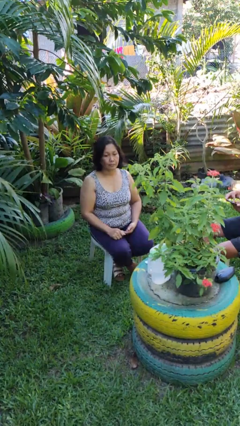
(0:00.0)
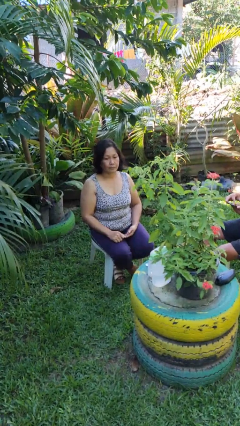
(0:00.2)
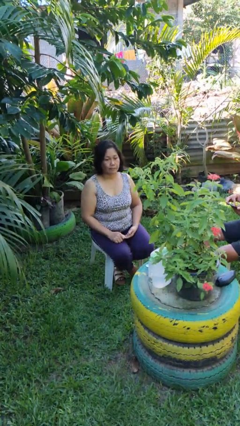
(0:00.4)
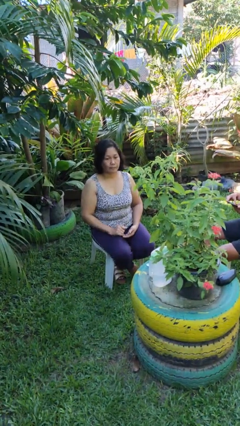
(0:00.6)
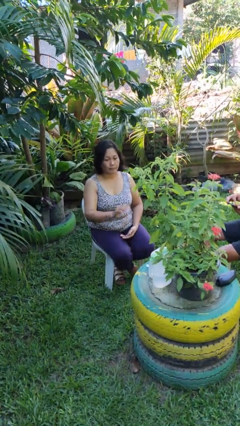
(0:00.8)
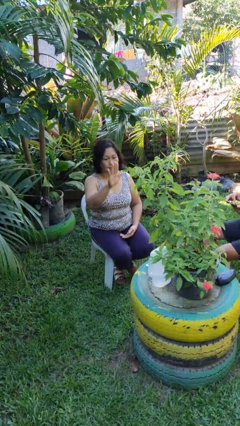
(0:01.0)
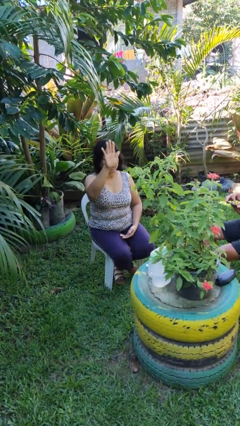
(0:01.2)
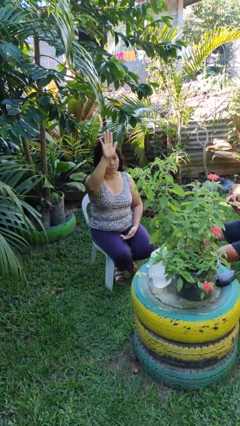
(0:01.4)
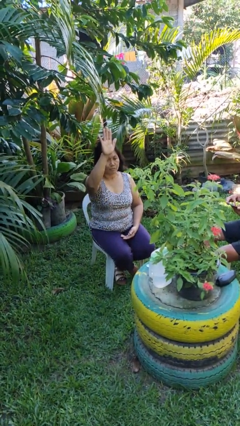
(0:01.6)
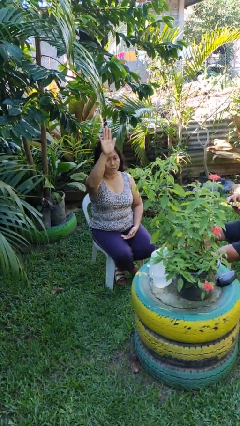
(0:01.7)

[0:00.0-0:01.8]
person gestures swipe up

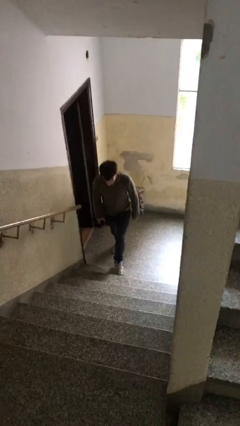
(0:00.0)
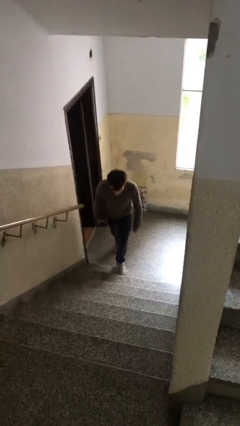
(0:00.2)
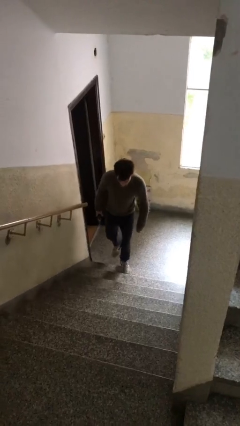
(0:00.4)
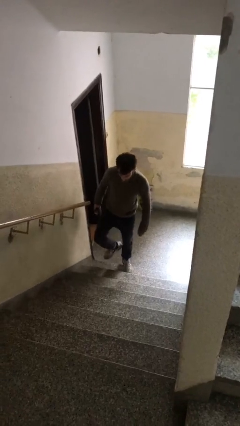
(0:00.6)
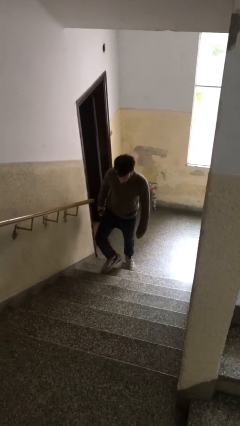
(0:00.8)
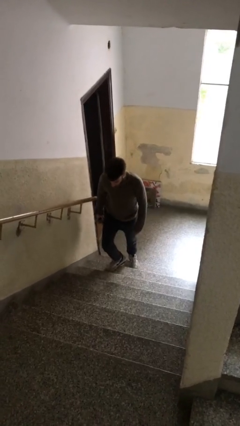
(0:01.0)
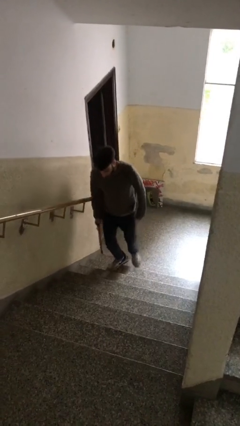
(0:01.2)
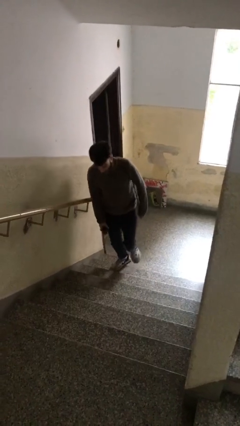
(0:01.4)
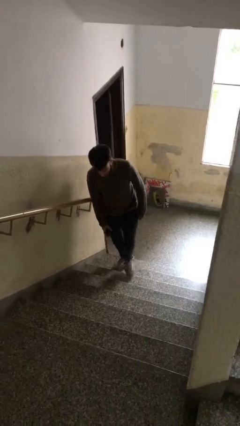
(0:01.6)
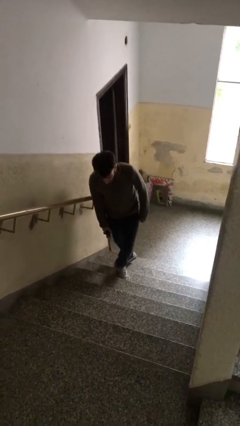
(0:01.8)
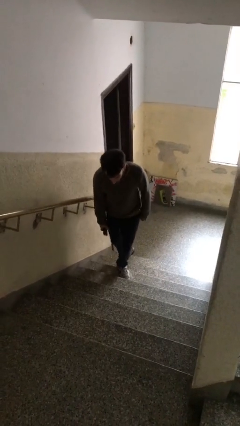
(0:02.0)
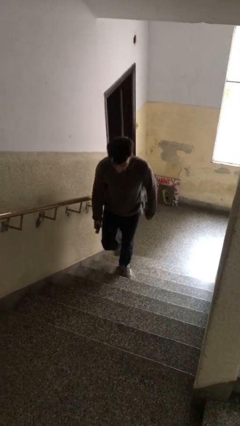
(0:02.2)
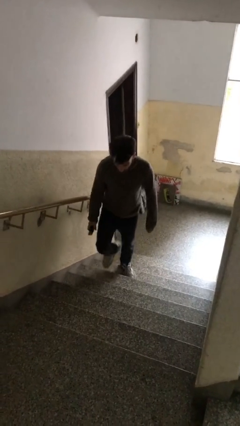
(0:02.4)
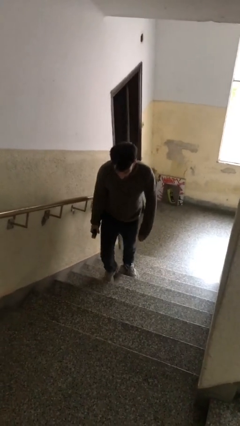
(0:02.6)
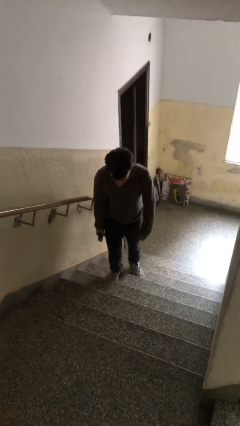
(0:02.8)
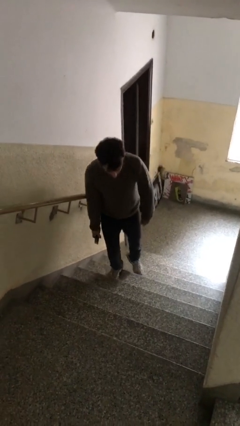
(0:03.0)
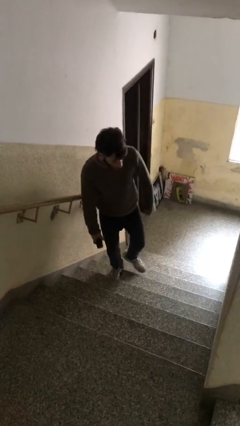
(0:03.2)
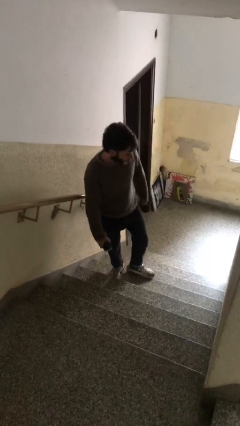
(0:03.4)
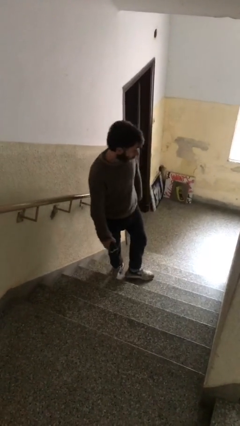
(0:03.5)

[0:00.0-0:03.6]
person climbs up stairs

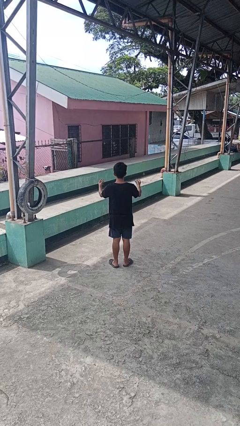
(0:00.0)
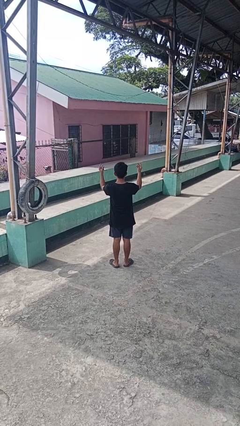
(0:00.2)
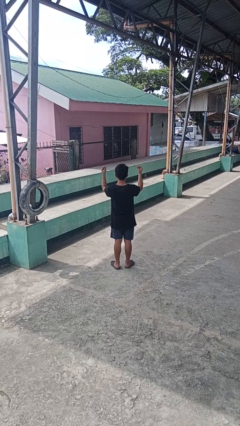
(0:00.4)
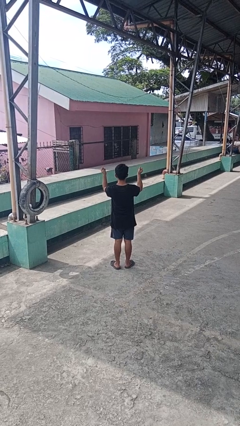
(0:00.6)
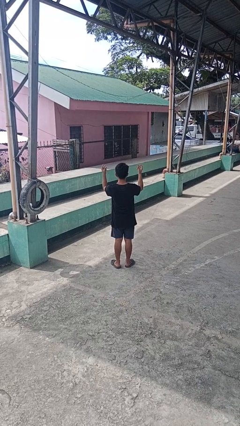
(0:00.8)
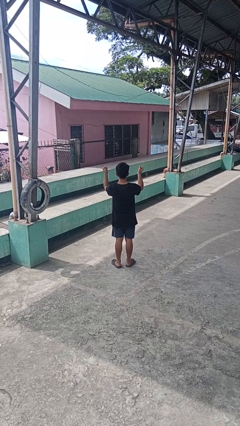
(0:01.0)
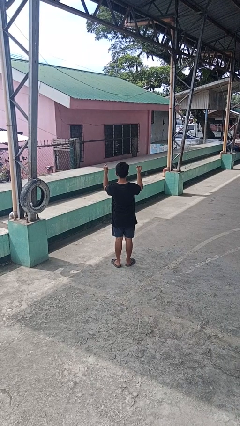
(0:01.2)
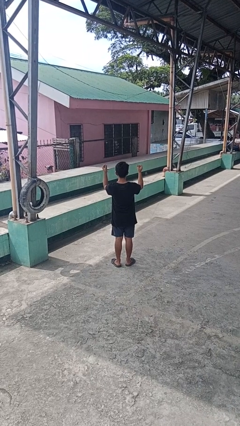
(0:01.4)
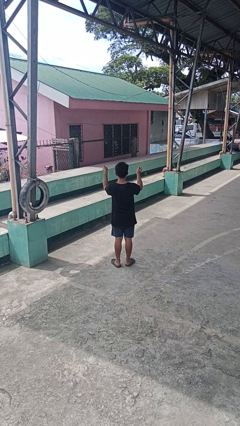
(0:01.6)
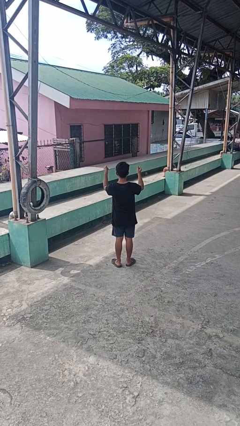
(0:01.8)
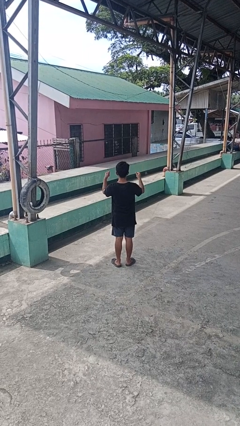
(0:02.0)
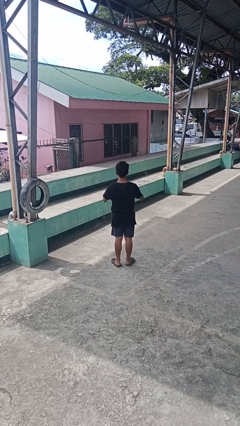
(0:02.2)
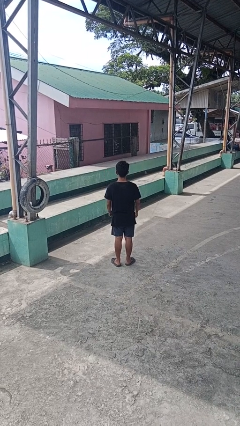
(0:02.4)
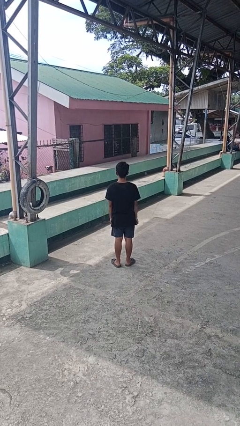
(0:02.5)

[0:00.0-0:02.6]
person snaps fingers

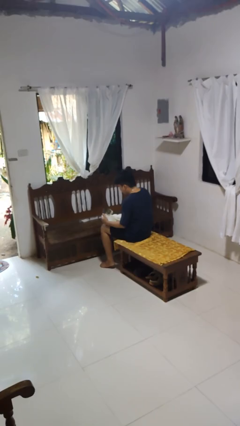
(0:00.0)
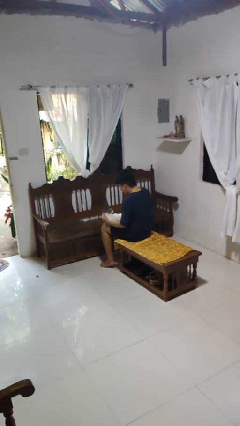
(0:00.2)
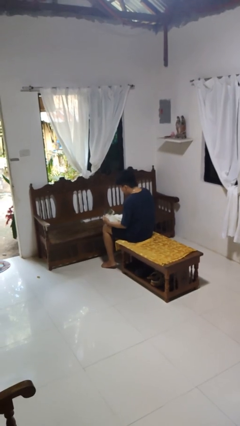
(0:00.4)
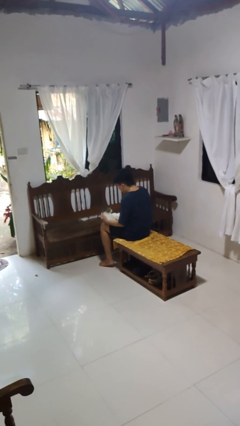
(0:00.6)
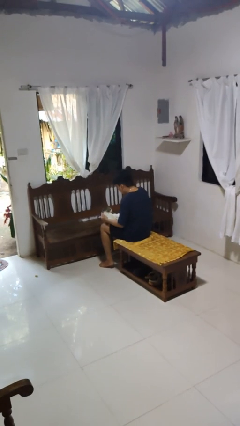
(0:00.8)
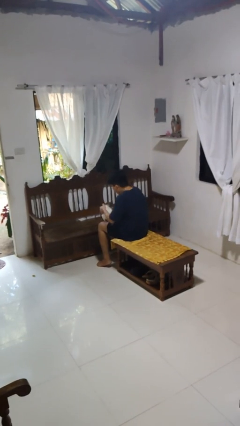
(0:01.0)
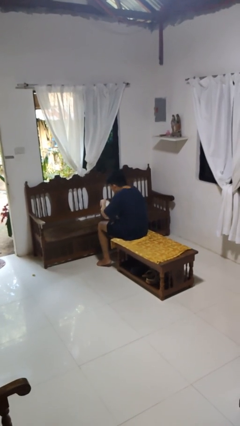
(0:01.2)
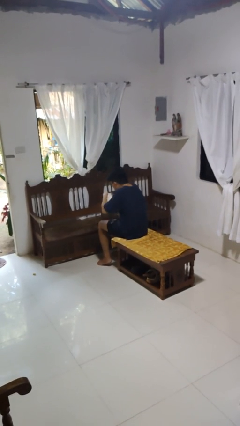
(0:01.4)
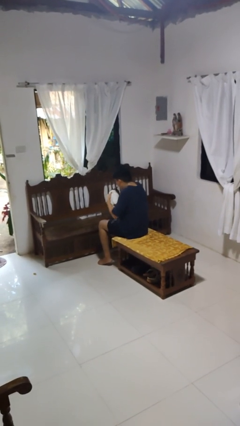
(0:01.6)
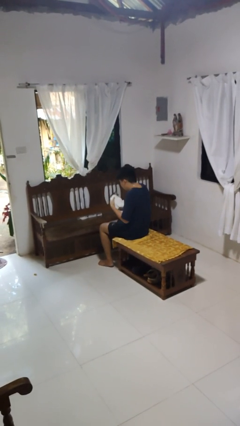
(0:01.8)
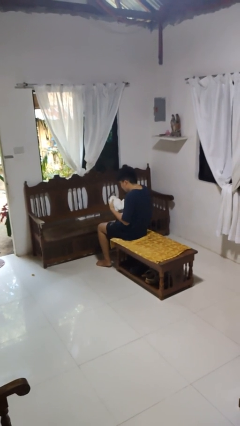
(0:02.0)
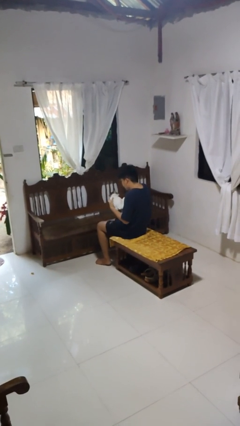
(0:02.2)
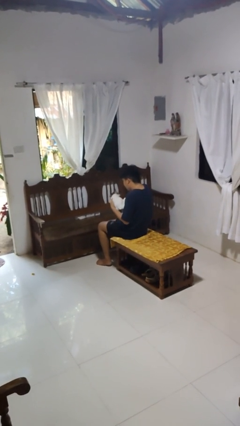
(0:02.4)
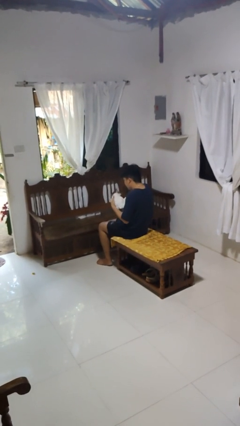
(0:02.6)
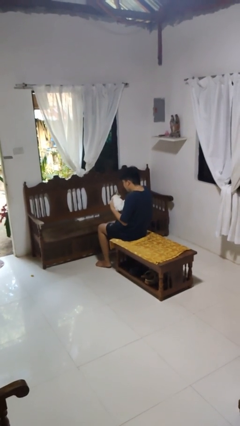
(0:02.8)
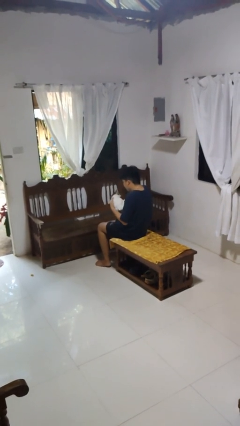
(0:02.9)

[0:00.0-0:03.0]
person hugs cat

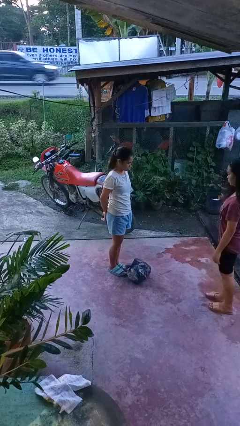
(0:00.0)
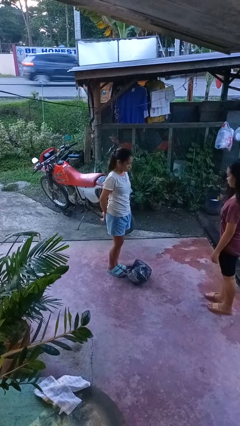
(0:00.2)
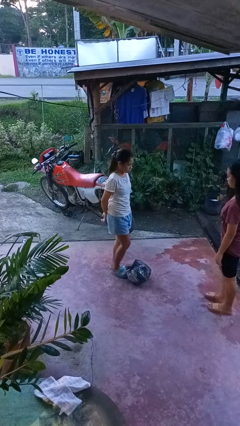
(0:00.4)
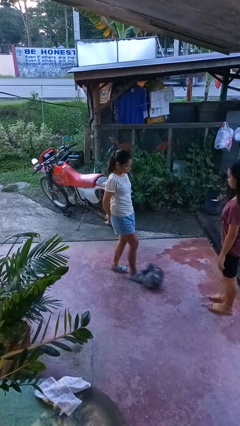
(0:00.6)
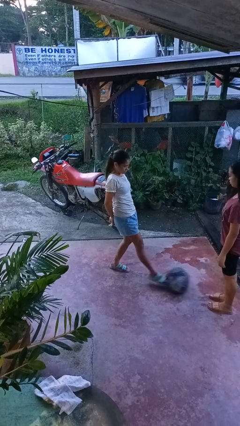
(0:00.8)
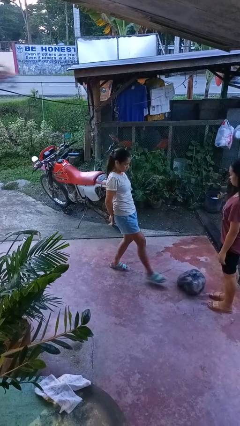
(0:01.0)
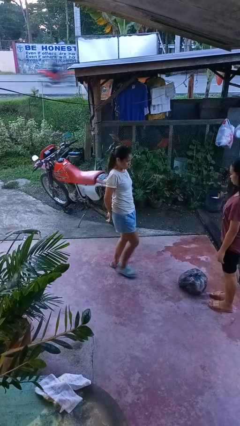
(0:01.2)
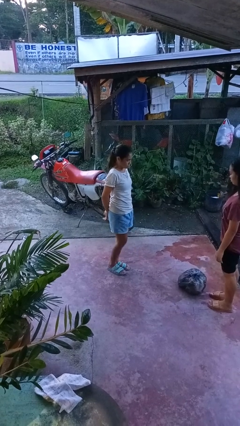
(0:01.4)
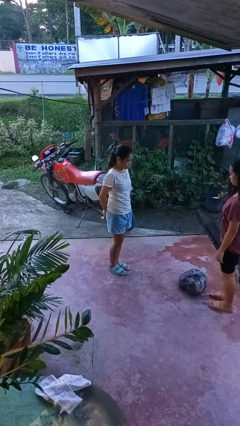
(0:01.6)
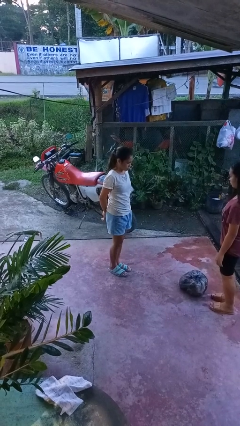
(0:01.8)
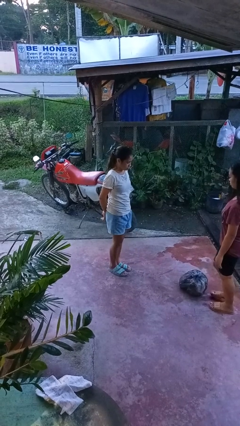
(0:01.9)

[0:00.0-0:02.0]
person kicks object to person

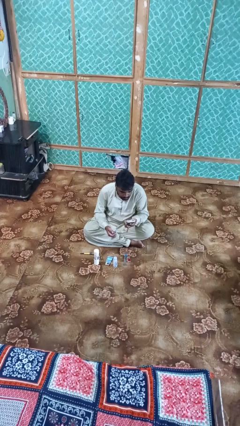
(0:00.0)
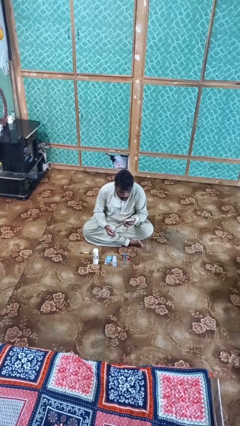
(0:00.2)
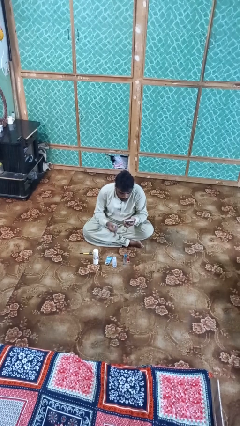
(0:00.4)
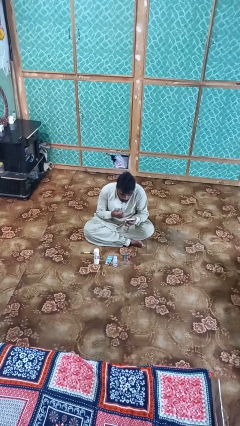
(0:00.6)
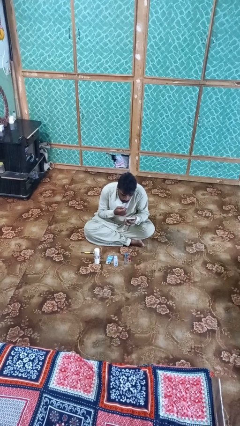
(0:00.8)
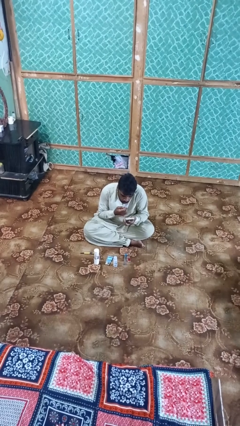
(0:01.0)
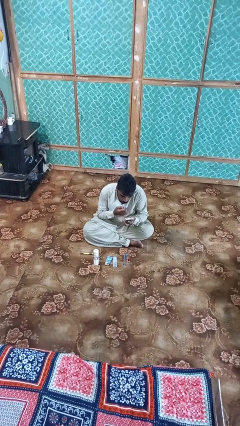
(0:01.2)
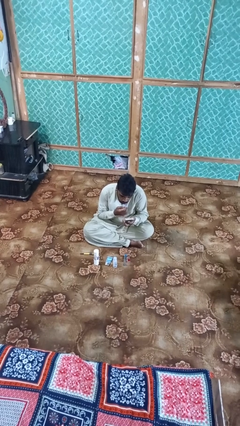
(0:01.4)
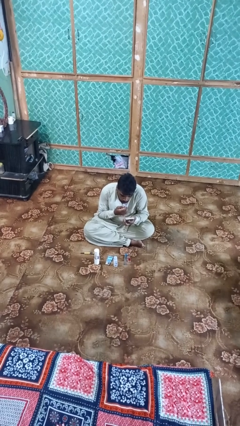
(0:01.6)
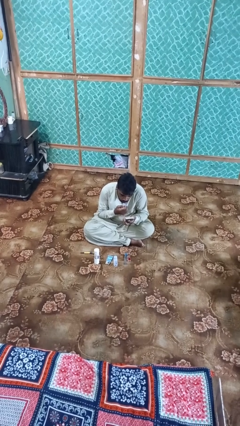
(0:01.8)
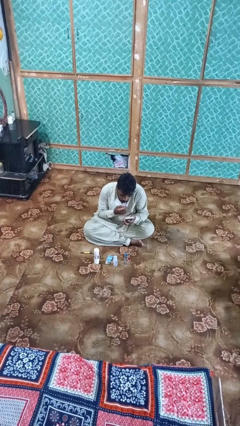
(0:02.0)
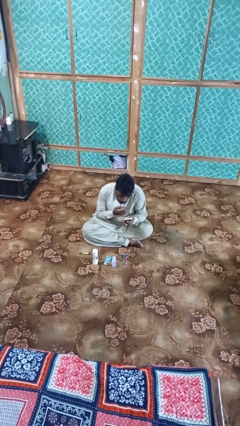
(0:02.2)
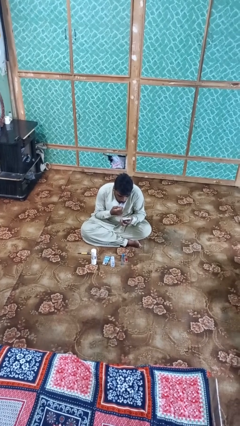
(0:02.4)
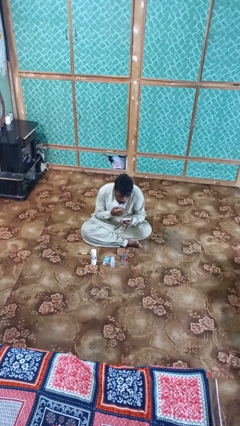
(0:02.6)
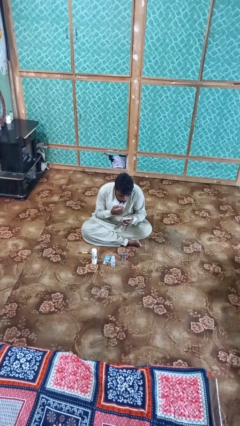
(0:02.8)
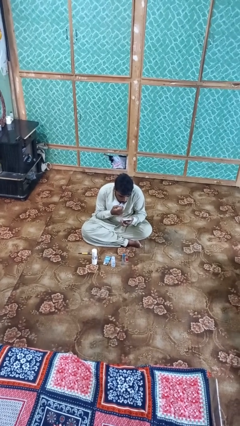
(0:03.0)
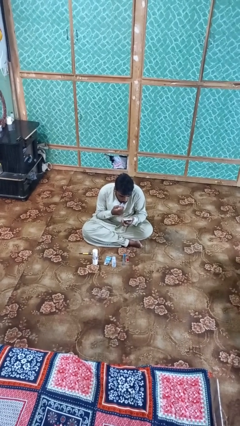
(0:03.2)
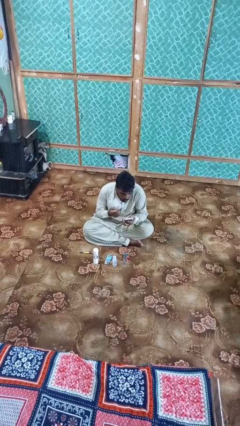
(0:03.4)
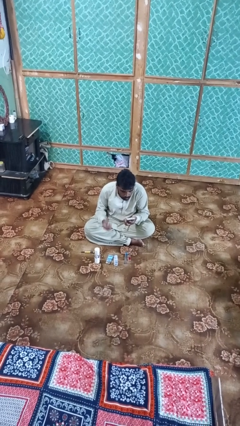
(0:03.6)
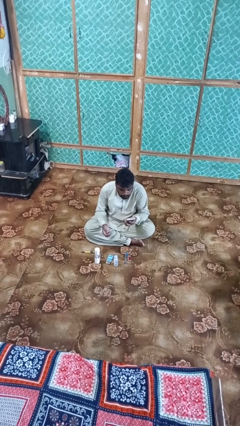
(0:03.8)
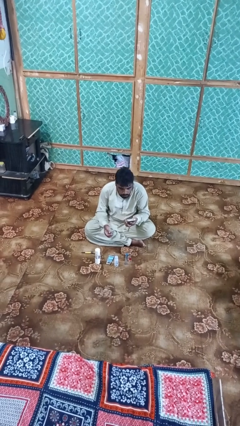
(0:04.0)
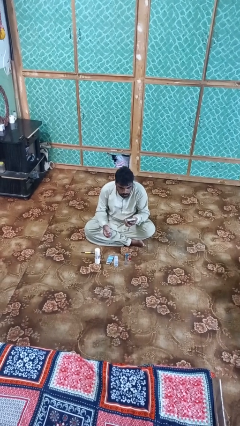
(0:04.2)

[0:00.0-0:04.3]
person applies lip makeup
